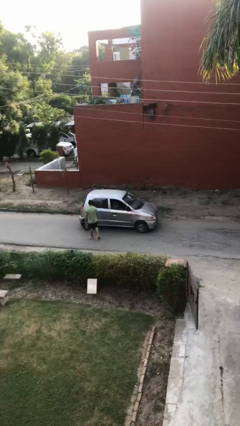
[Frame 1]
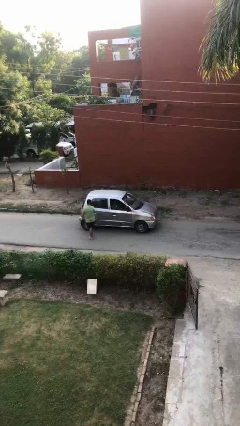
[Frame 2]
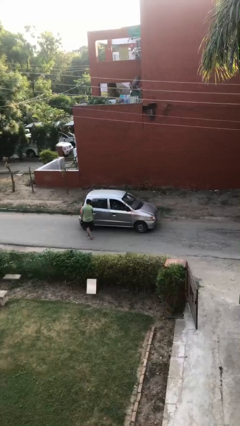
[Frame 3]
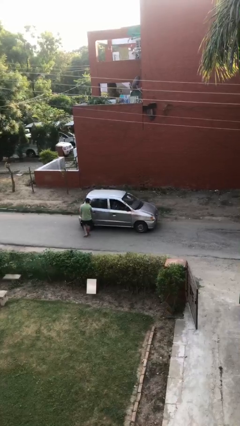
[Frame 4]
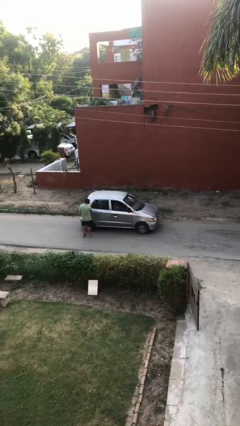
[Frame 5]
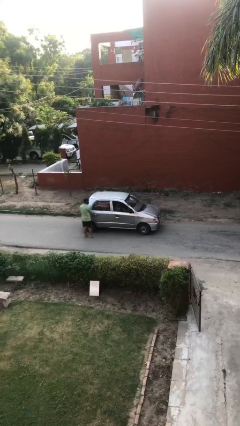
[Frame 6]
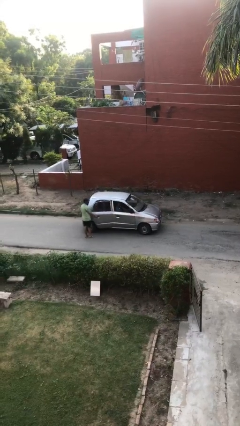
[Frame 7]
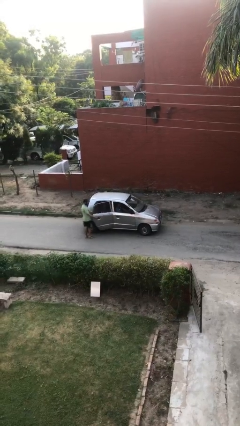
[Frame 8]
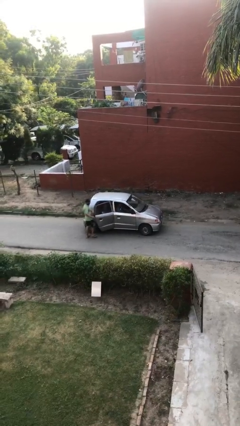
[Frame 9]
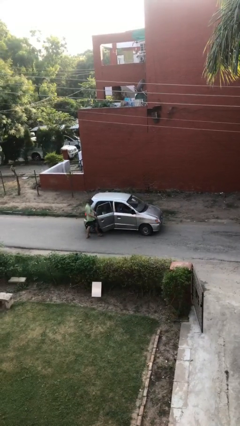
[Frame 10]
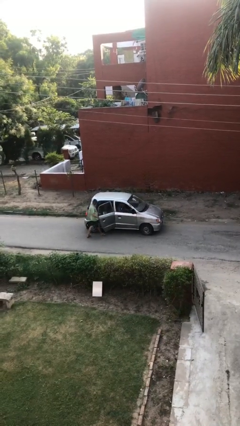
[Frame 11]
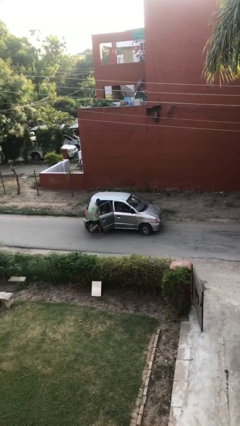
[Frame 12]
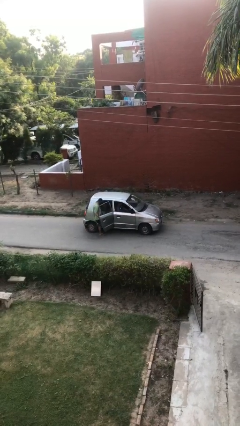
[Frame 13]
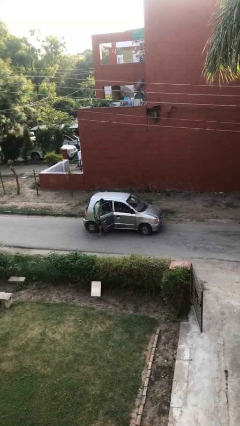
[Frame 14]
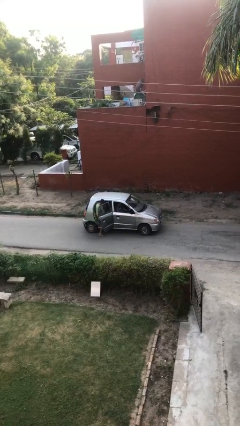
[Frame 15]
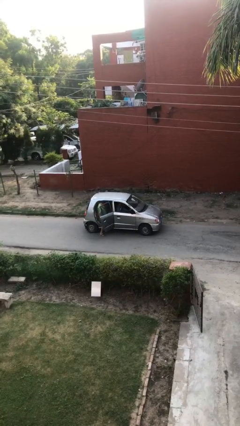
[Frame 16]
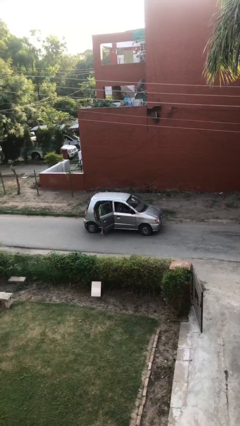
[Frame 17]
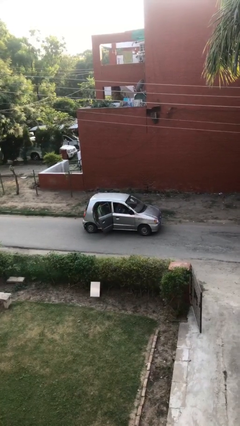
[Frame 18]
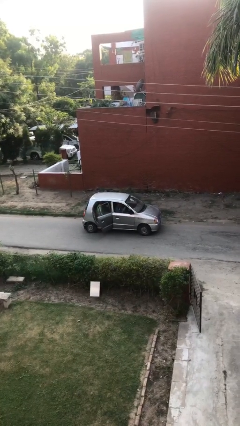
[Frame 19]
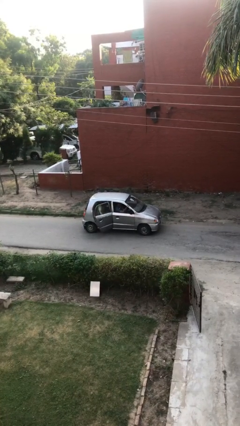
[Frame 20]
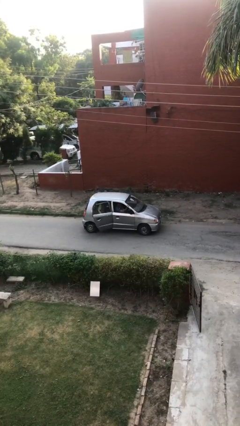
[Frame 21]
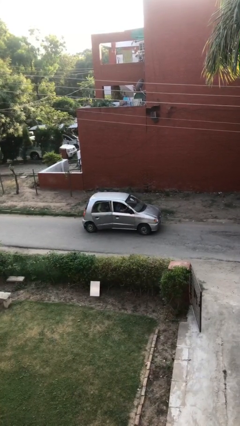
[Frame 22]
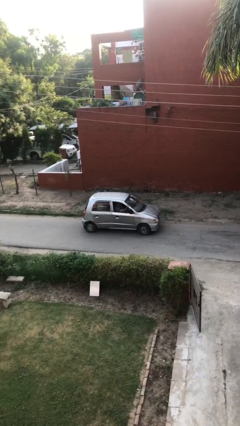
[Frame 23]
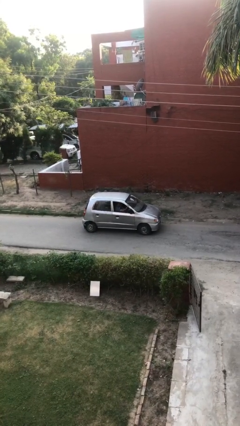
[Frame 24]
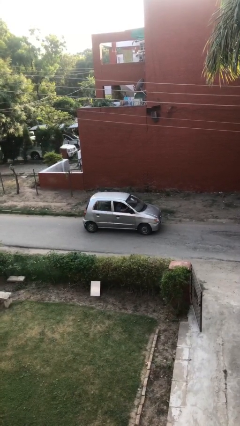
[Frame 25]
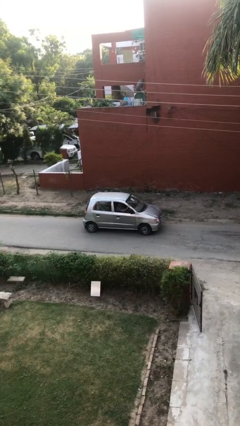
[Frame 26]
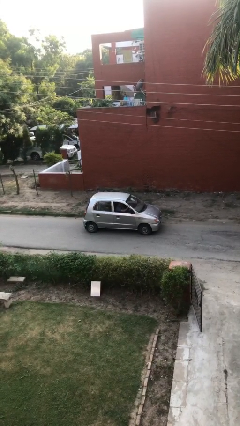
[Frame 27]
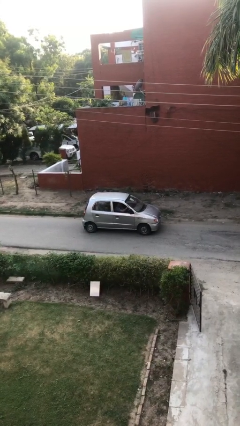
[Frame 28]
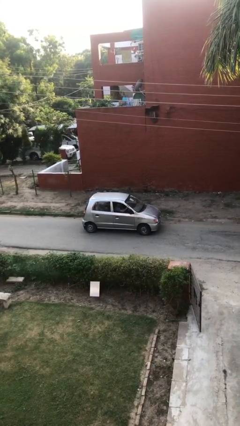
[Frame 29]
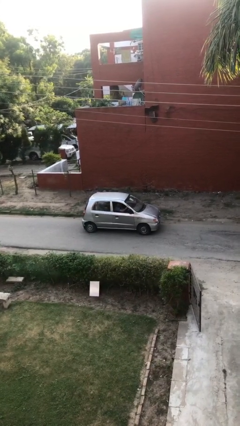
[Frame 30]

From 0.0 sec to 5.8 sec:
car picks up person

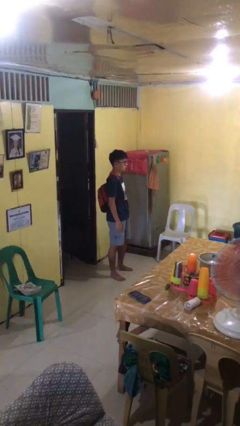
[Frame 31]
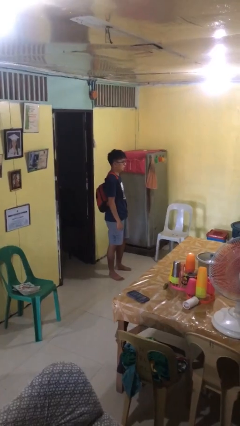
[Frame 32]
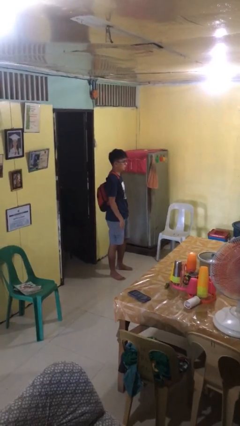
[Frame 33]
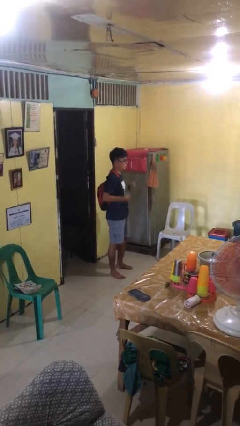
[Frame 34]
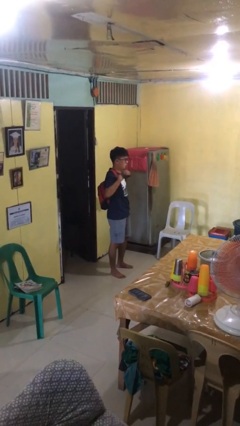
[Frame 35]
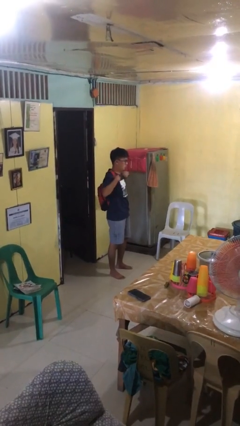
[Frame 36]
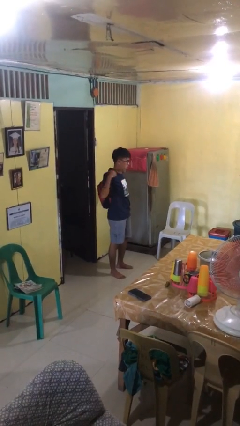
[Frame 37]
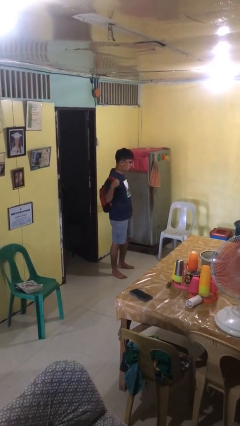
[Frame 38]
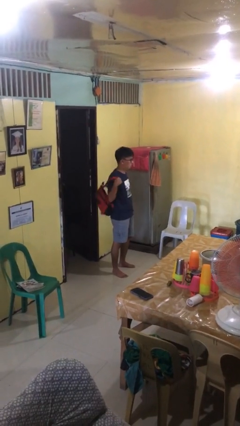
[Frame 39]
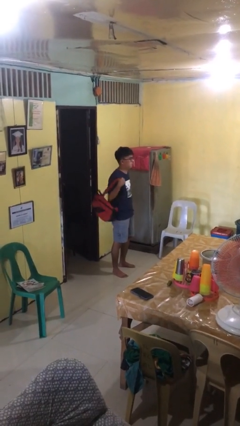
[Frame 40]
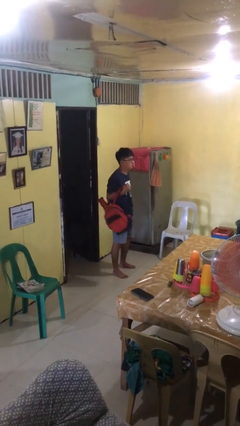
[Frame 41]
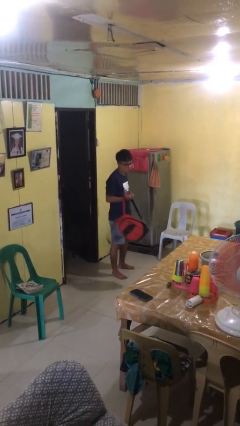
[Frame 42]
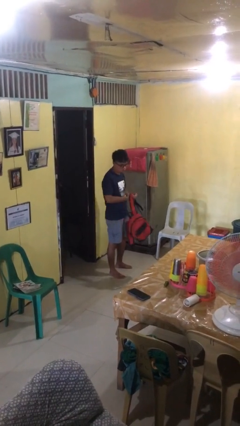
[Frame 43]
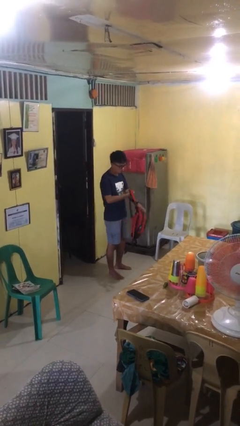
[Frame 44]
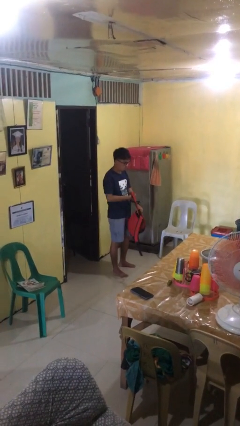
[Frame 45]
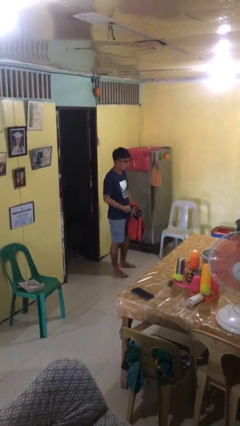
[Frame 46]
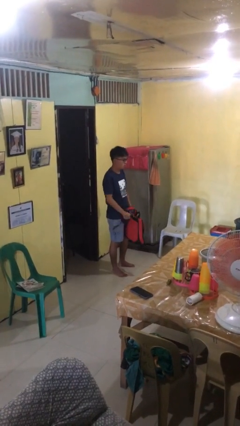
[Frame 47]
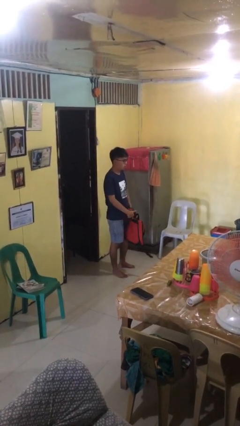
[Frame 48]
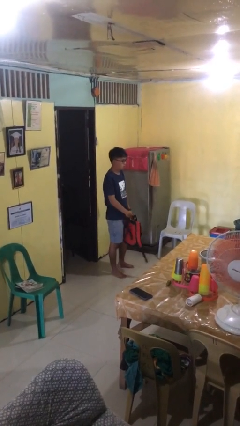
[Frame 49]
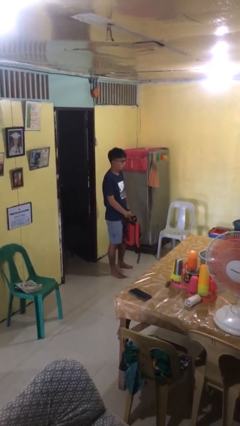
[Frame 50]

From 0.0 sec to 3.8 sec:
person takes off backpack

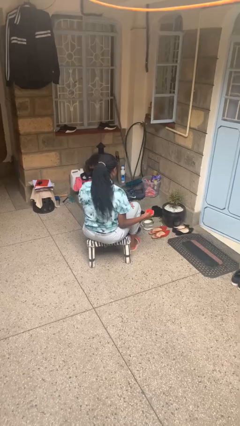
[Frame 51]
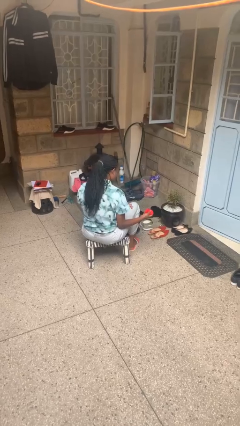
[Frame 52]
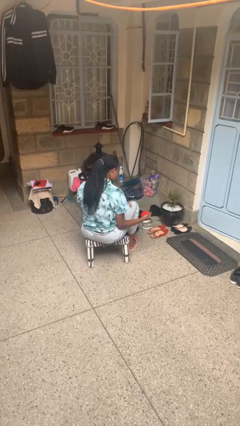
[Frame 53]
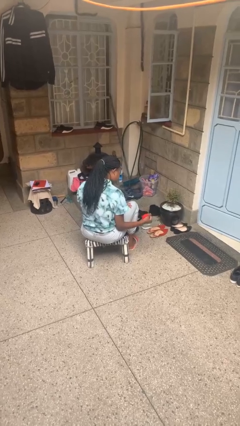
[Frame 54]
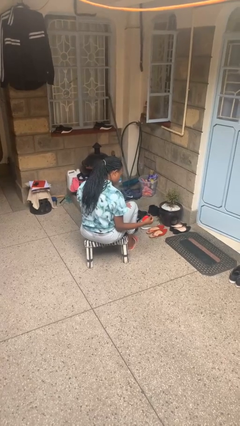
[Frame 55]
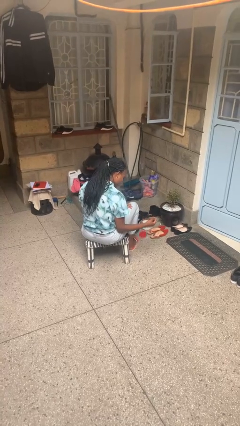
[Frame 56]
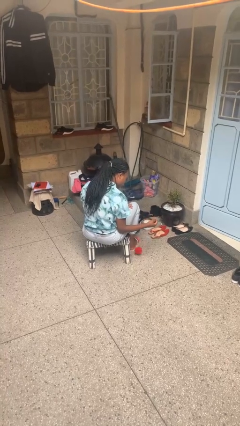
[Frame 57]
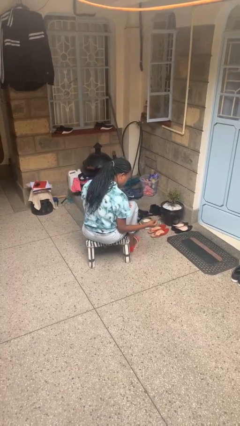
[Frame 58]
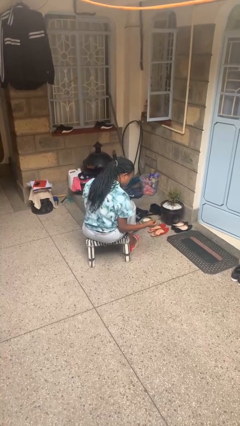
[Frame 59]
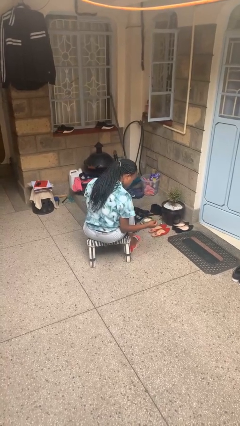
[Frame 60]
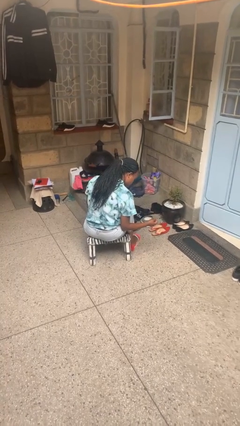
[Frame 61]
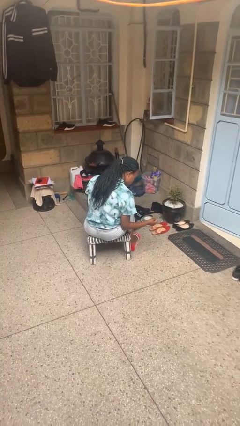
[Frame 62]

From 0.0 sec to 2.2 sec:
person drops object

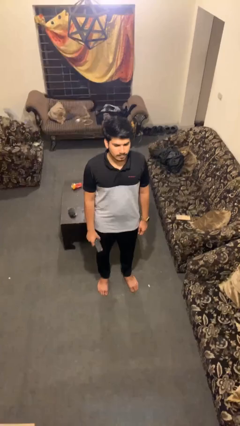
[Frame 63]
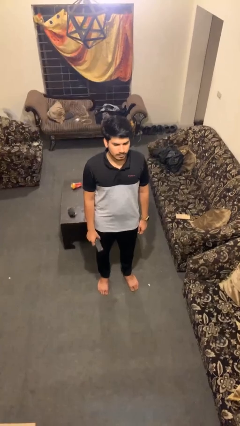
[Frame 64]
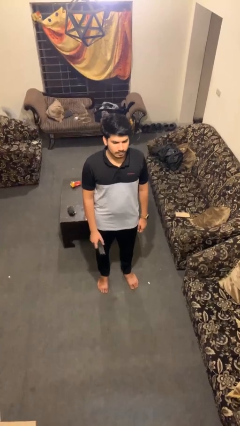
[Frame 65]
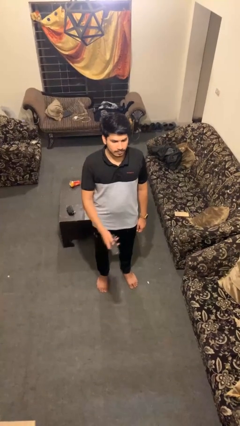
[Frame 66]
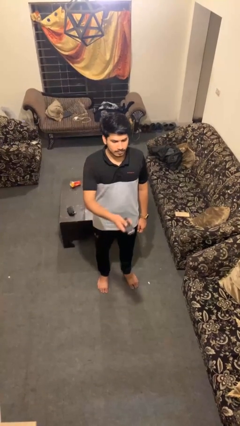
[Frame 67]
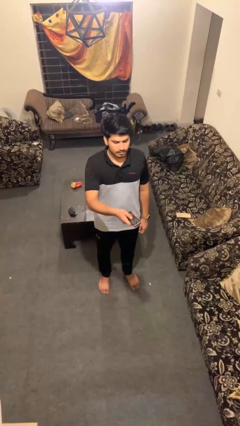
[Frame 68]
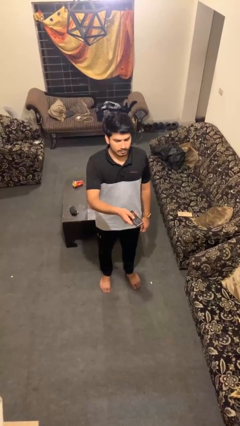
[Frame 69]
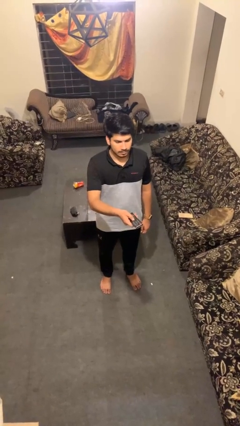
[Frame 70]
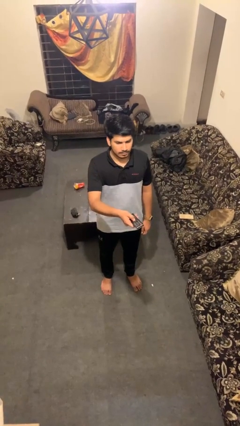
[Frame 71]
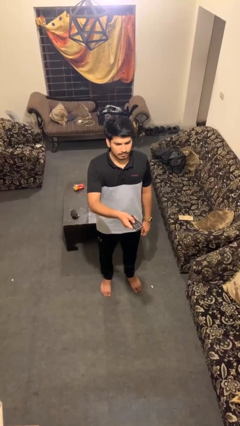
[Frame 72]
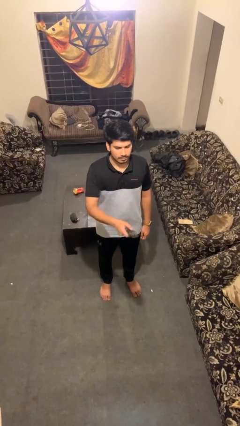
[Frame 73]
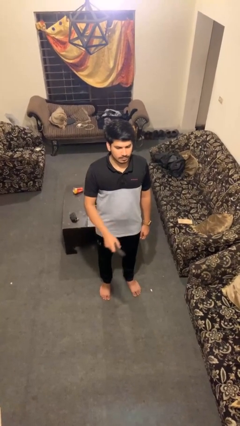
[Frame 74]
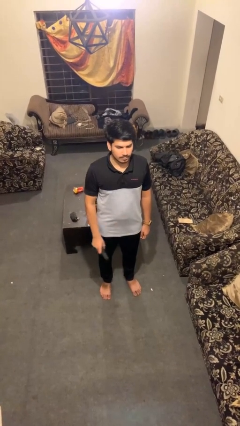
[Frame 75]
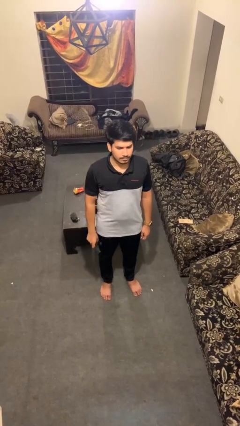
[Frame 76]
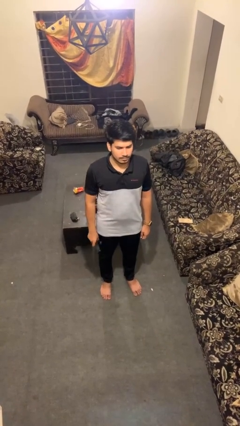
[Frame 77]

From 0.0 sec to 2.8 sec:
person uses television remote

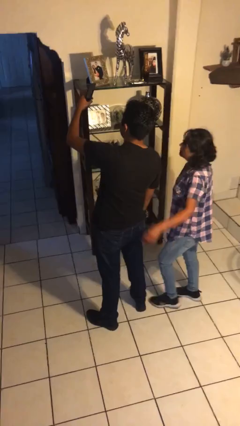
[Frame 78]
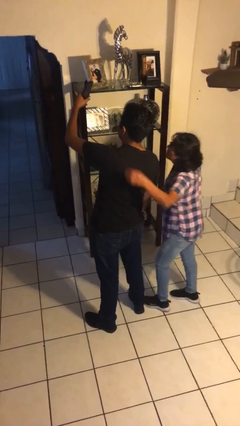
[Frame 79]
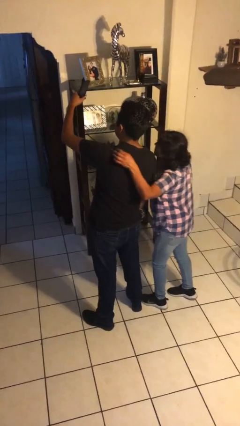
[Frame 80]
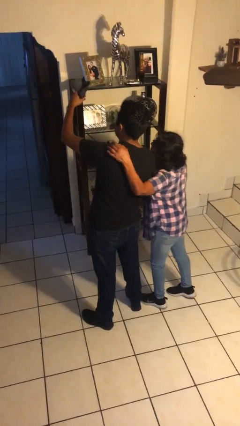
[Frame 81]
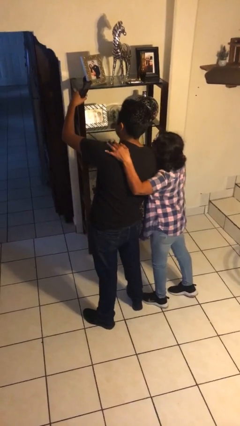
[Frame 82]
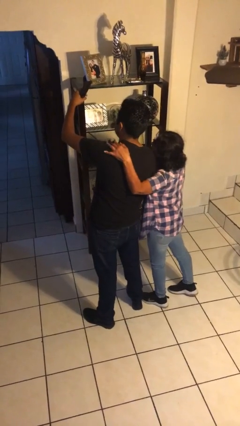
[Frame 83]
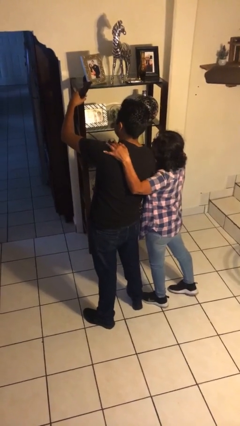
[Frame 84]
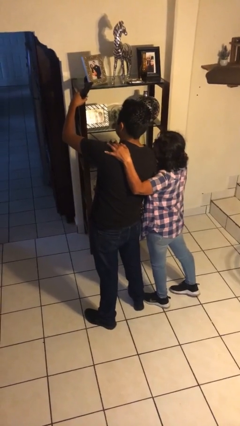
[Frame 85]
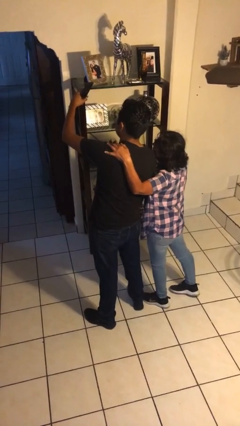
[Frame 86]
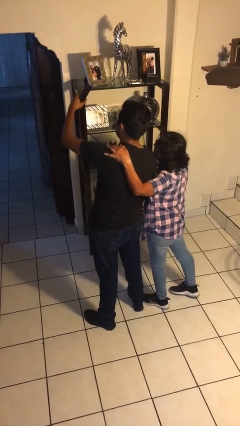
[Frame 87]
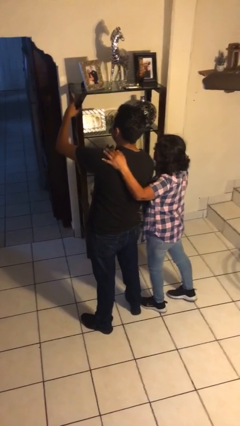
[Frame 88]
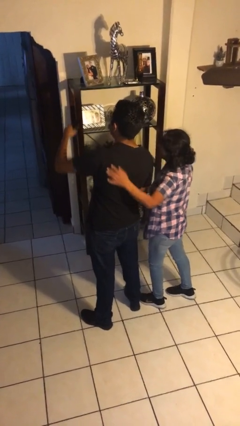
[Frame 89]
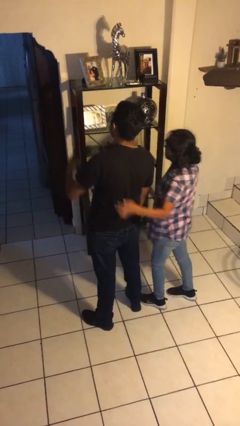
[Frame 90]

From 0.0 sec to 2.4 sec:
person takes selfie with person

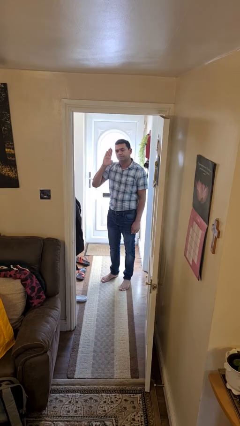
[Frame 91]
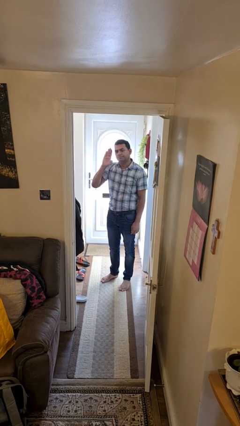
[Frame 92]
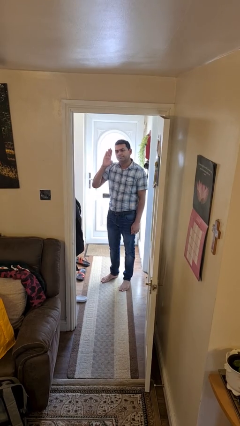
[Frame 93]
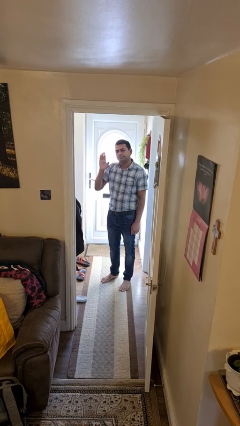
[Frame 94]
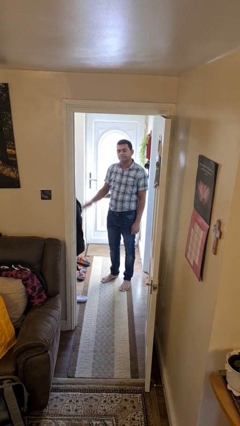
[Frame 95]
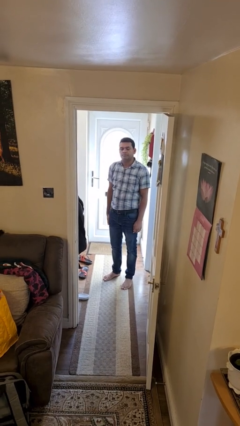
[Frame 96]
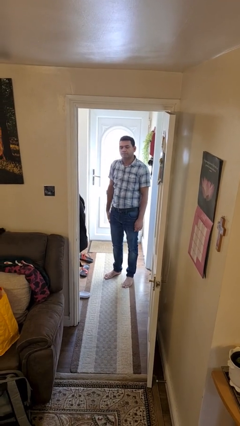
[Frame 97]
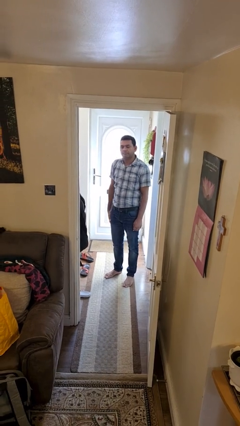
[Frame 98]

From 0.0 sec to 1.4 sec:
person salutes
